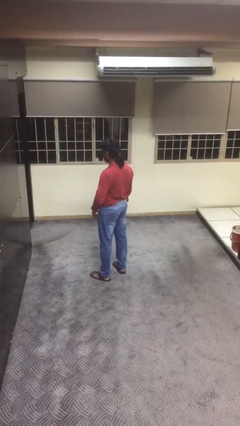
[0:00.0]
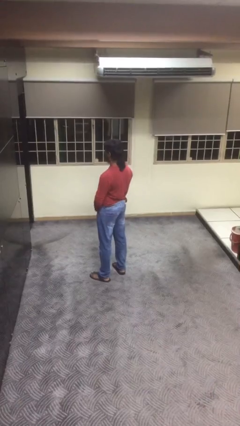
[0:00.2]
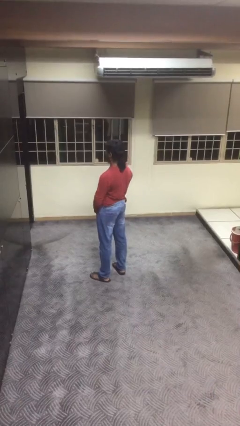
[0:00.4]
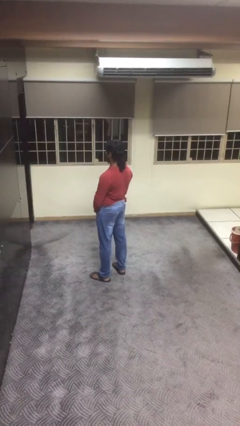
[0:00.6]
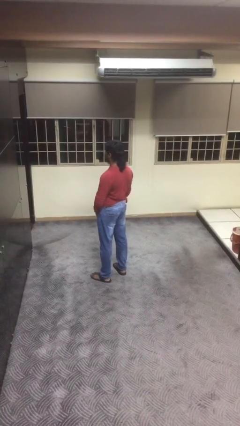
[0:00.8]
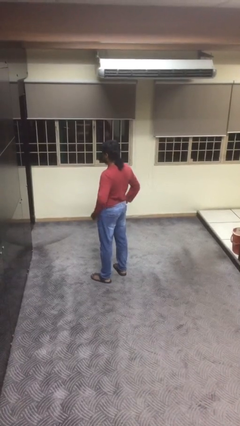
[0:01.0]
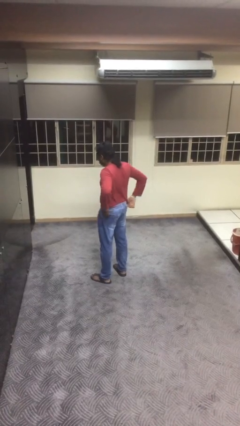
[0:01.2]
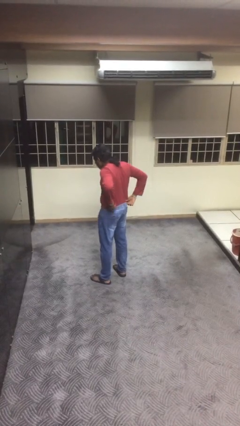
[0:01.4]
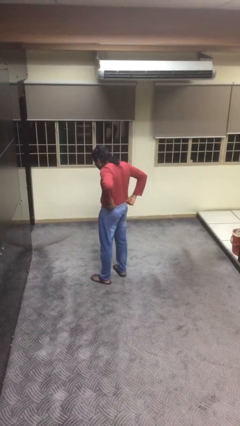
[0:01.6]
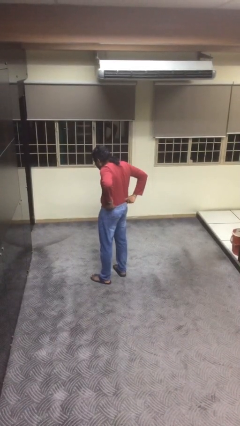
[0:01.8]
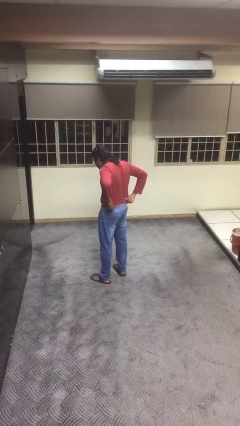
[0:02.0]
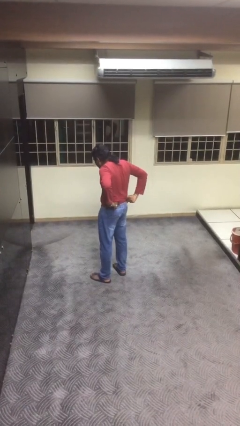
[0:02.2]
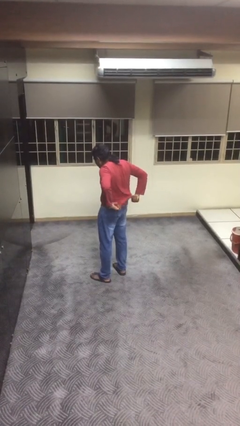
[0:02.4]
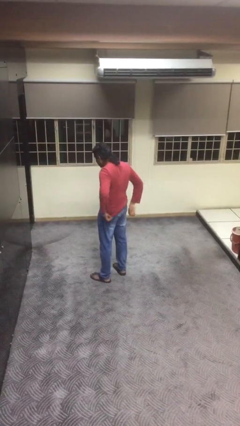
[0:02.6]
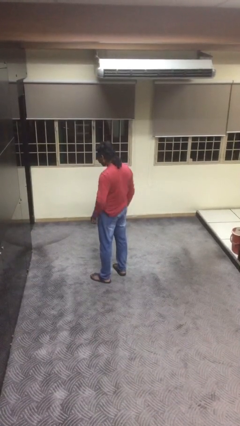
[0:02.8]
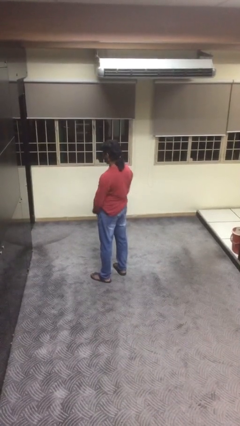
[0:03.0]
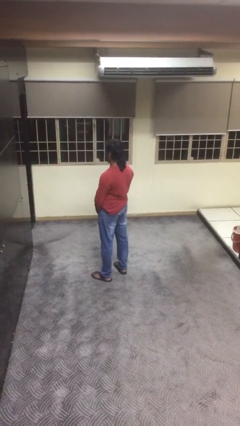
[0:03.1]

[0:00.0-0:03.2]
person untucks shirt

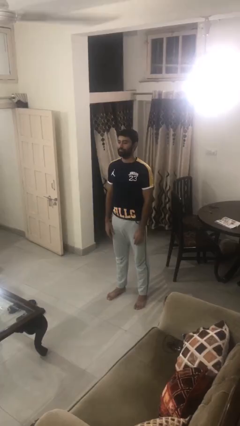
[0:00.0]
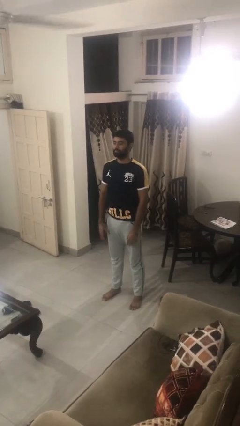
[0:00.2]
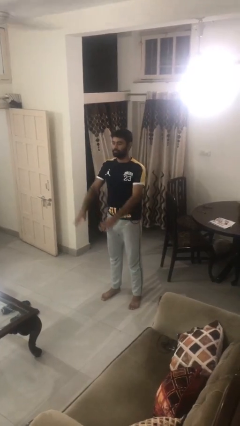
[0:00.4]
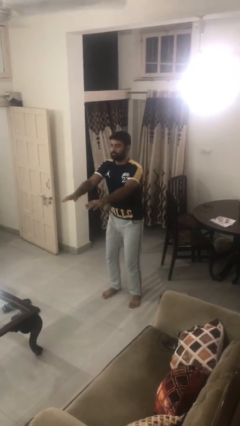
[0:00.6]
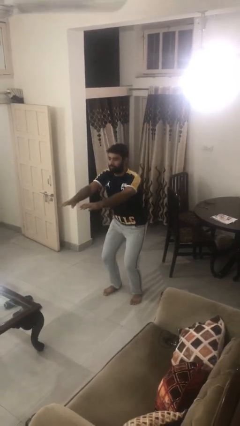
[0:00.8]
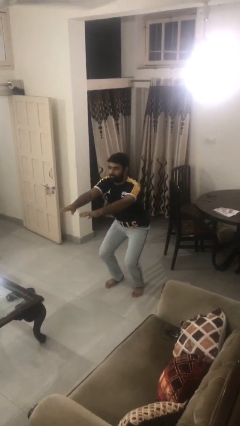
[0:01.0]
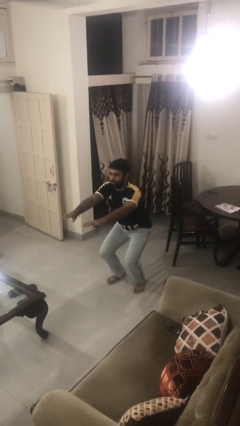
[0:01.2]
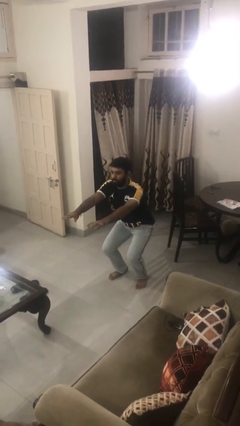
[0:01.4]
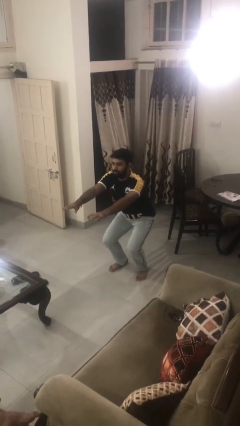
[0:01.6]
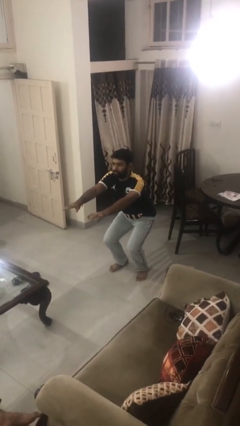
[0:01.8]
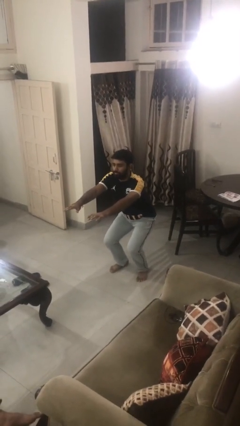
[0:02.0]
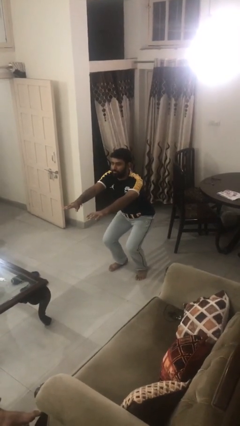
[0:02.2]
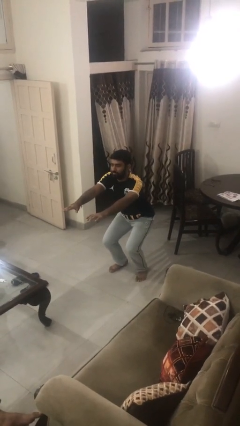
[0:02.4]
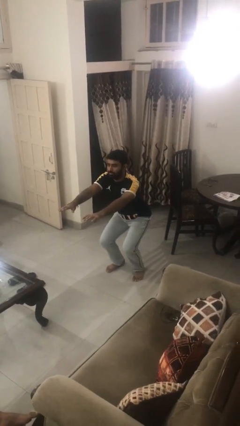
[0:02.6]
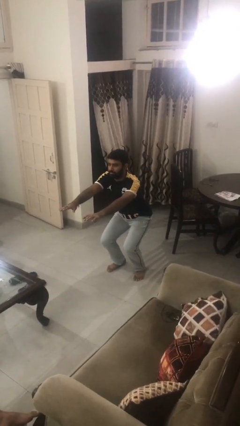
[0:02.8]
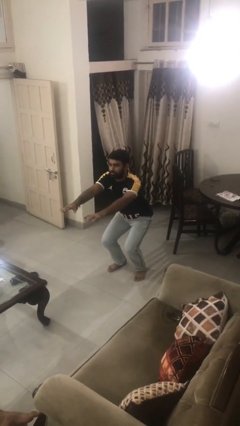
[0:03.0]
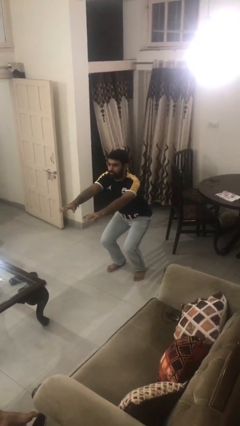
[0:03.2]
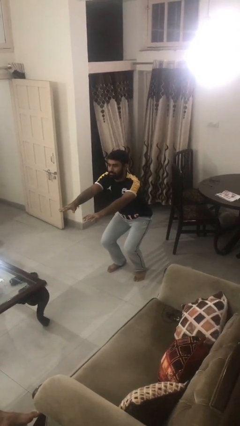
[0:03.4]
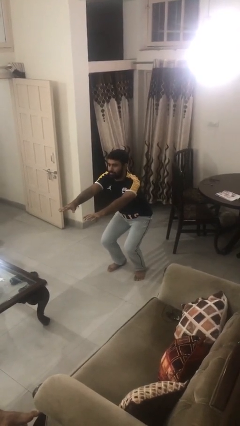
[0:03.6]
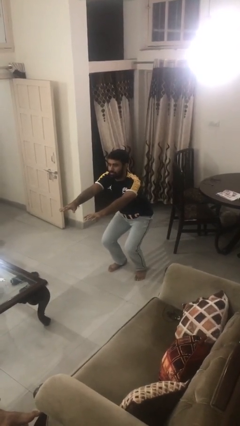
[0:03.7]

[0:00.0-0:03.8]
person squats

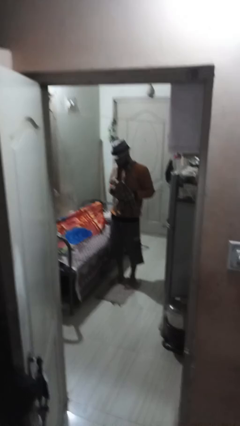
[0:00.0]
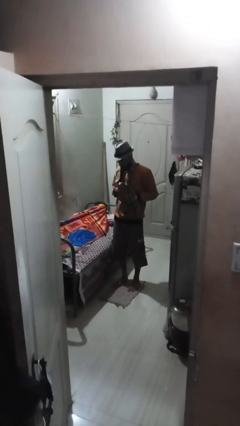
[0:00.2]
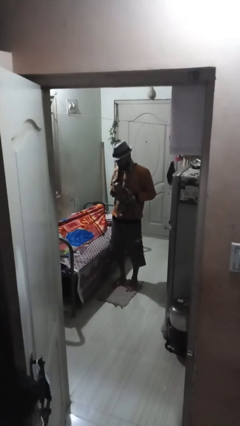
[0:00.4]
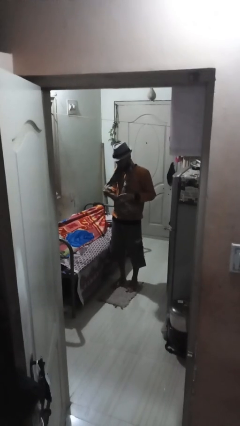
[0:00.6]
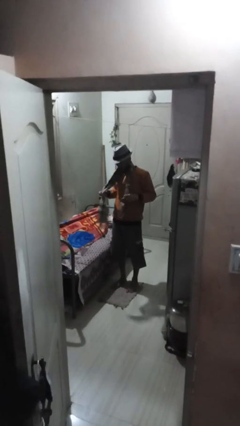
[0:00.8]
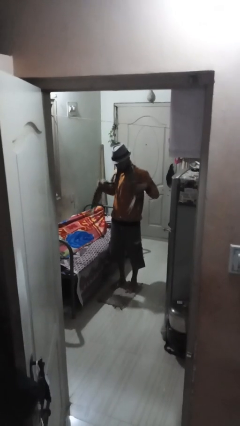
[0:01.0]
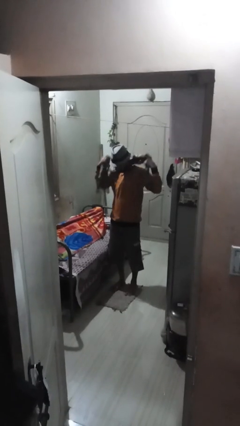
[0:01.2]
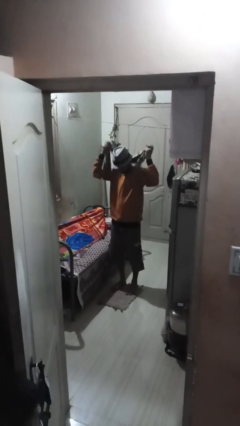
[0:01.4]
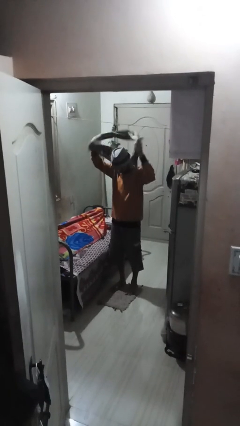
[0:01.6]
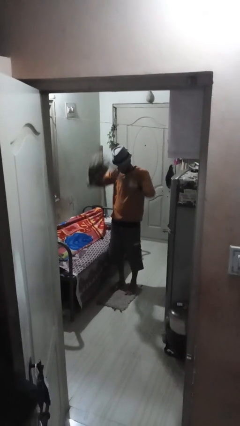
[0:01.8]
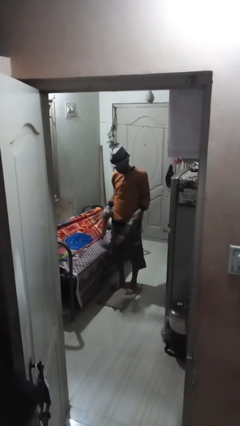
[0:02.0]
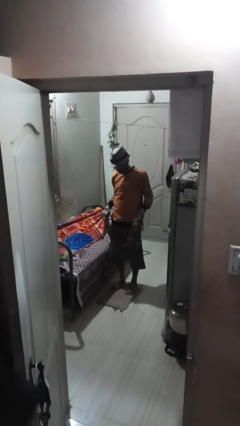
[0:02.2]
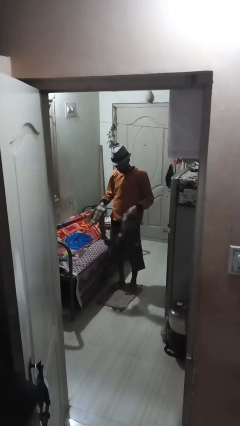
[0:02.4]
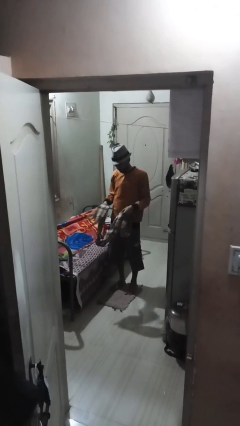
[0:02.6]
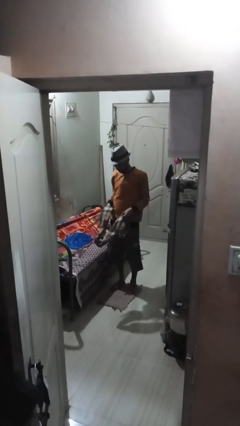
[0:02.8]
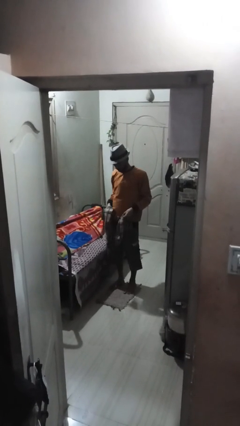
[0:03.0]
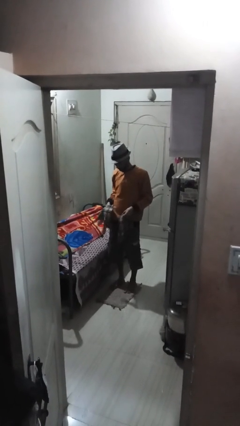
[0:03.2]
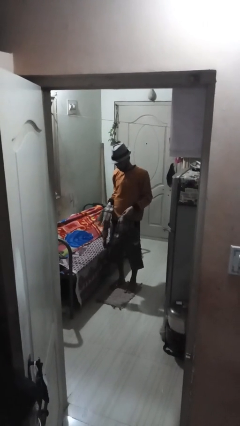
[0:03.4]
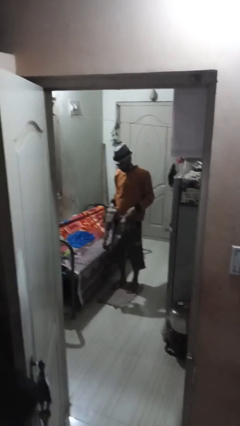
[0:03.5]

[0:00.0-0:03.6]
person takes off scarf

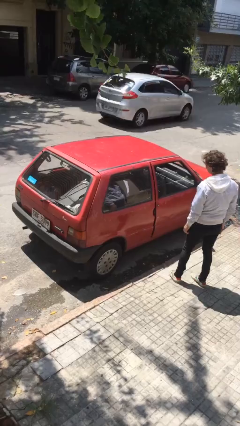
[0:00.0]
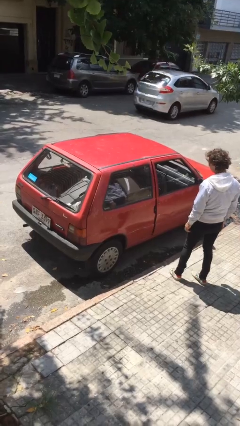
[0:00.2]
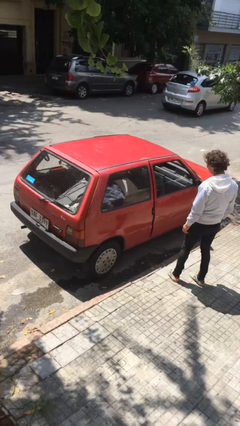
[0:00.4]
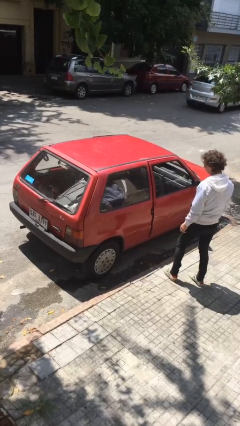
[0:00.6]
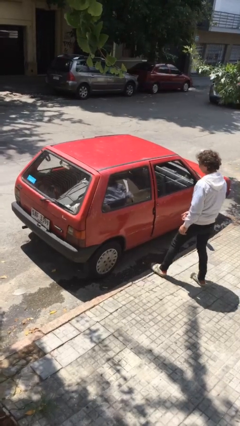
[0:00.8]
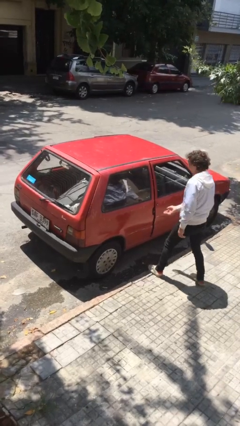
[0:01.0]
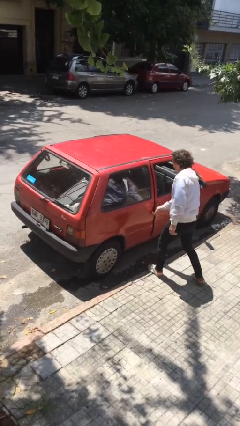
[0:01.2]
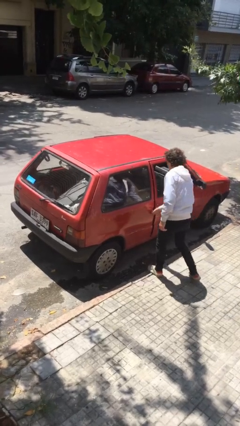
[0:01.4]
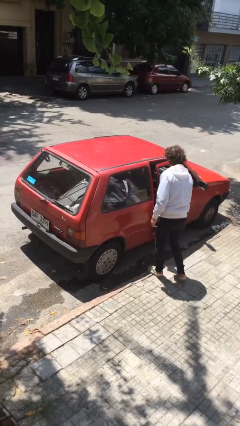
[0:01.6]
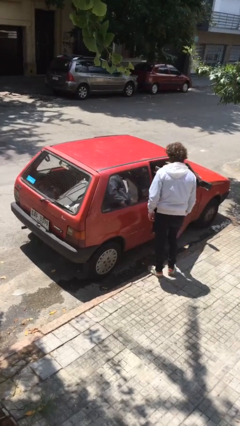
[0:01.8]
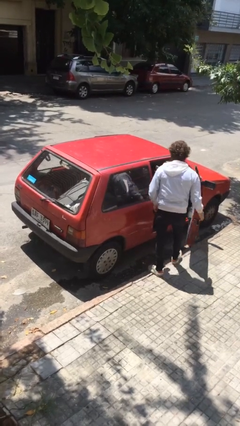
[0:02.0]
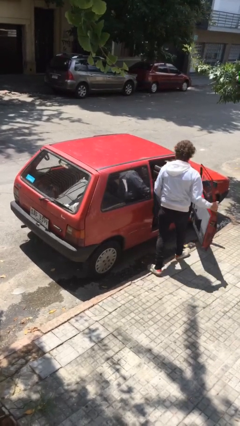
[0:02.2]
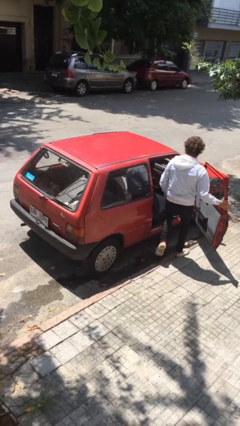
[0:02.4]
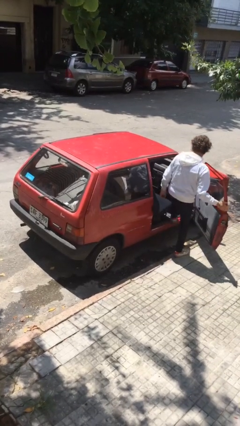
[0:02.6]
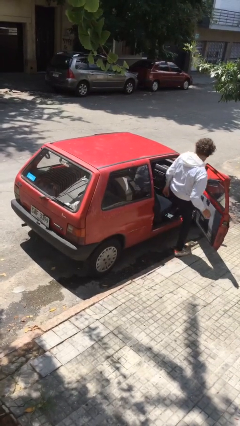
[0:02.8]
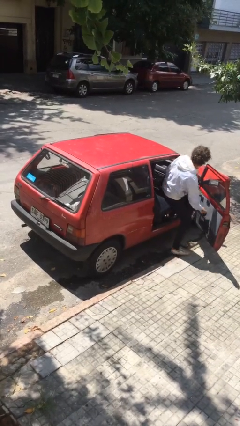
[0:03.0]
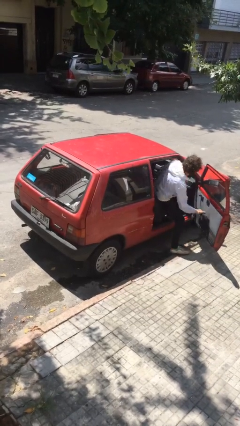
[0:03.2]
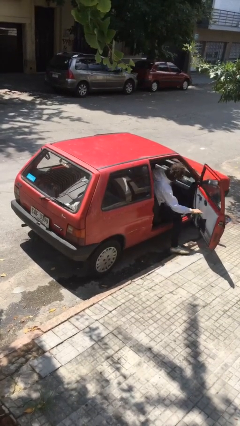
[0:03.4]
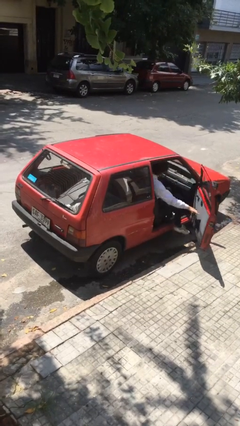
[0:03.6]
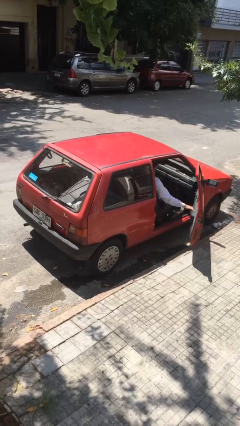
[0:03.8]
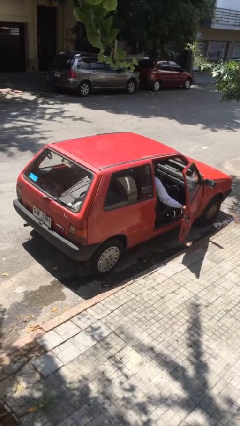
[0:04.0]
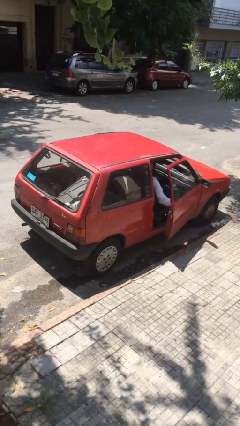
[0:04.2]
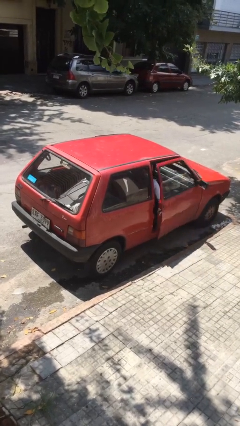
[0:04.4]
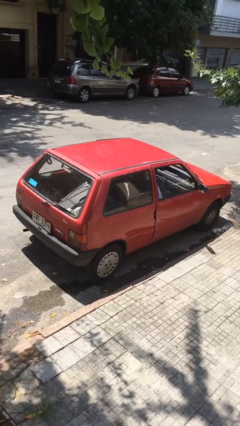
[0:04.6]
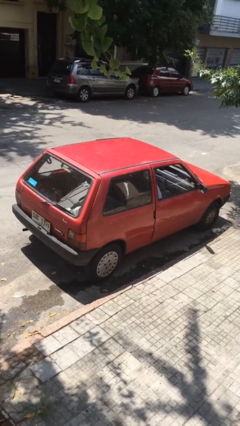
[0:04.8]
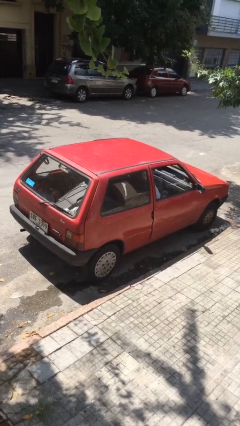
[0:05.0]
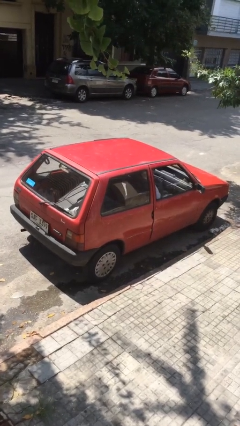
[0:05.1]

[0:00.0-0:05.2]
car picks up person

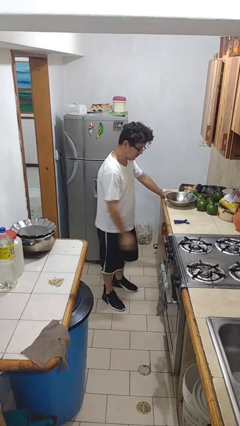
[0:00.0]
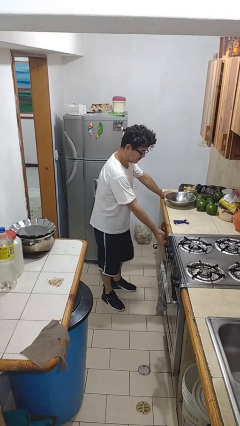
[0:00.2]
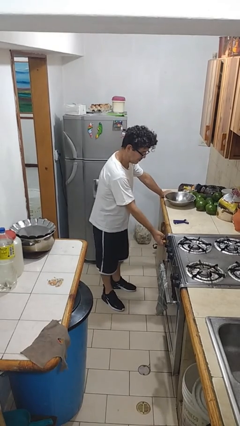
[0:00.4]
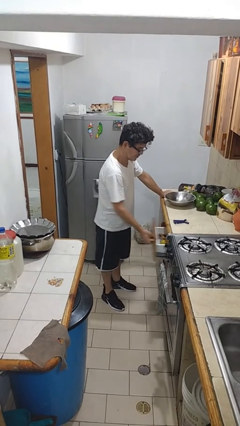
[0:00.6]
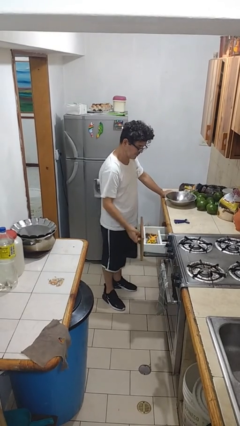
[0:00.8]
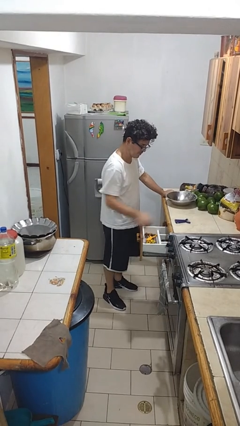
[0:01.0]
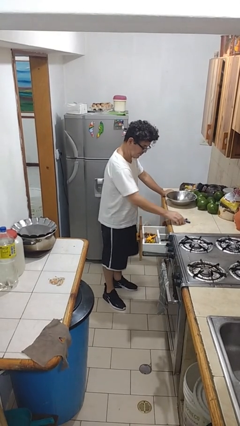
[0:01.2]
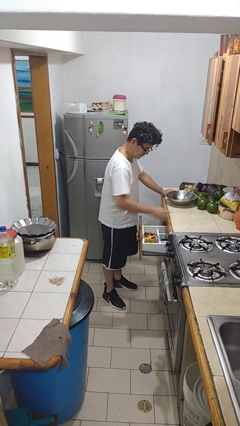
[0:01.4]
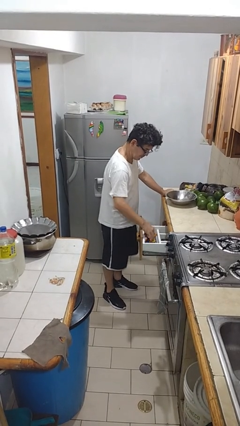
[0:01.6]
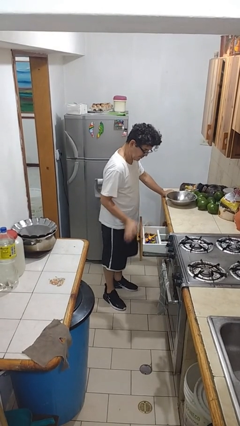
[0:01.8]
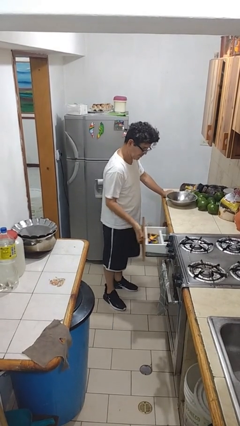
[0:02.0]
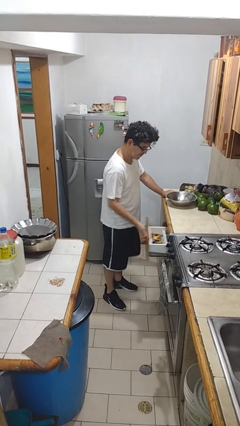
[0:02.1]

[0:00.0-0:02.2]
person puts object into kitchen drawer
